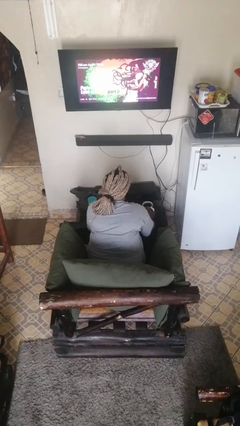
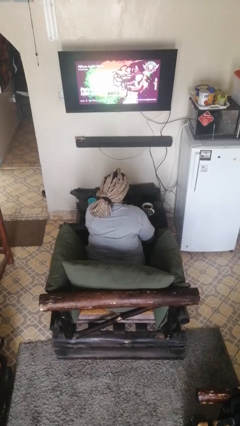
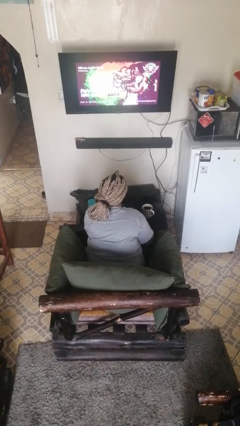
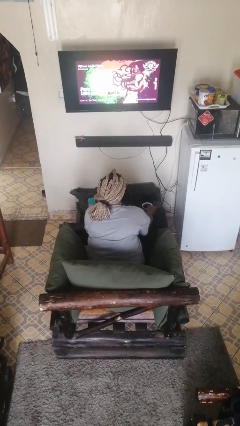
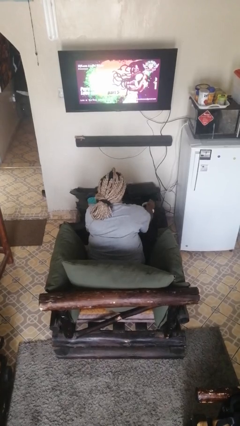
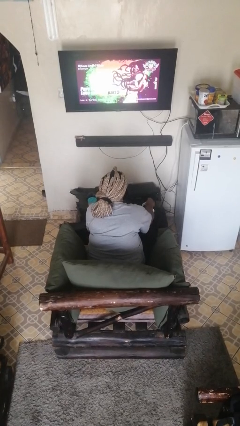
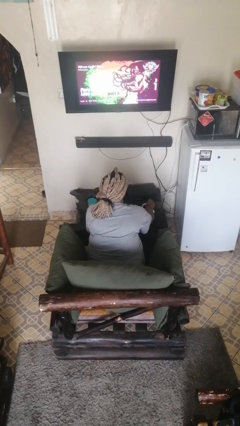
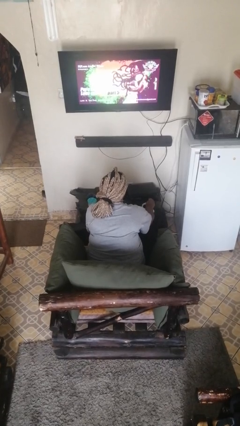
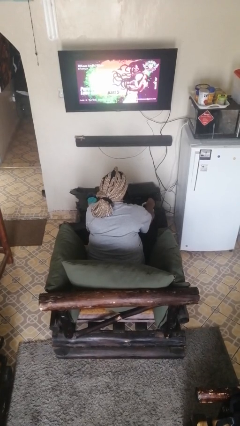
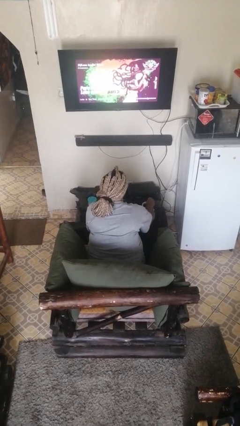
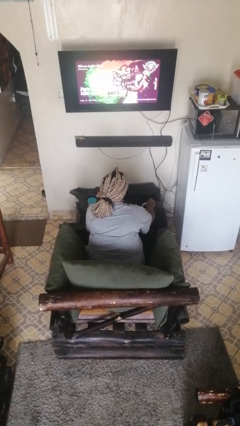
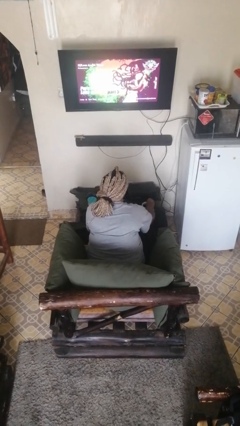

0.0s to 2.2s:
person stirs mug

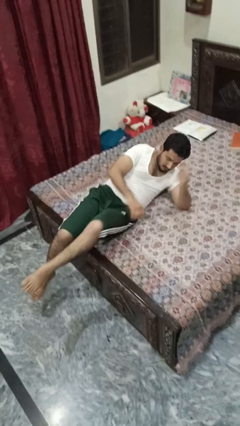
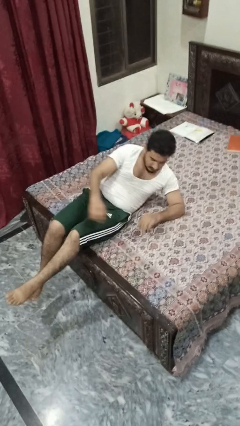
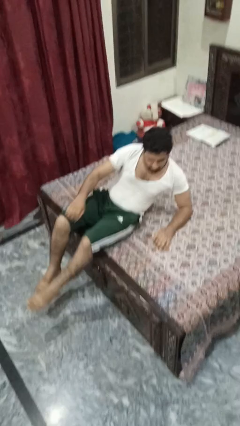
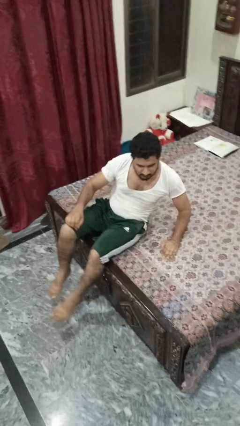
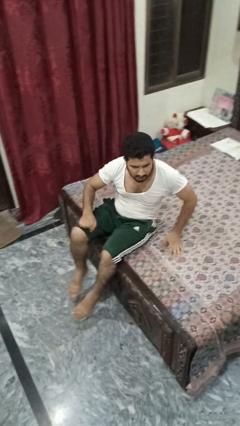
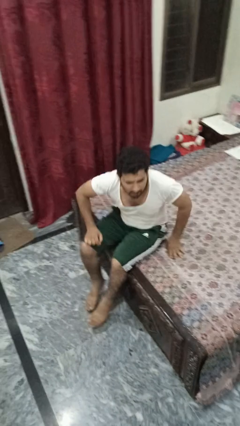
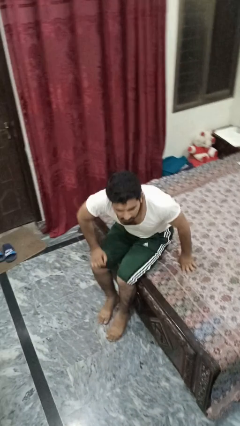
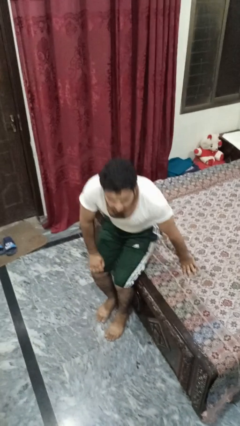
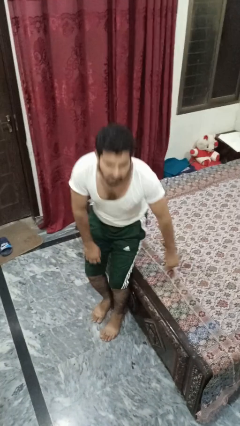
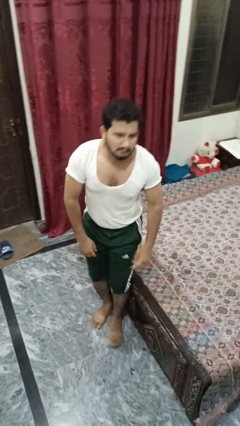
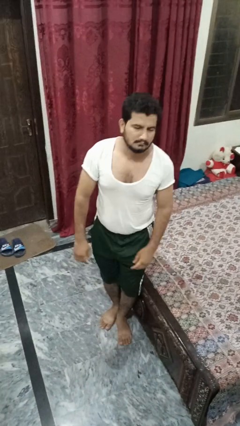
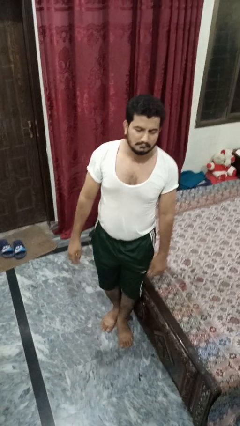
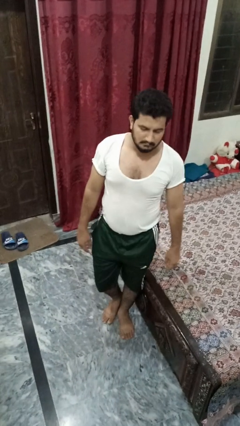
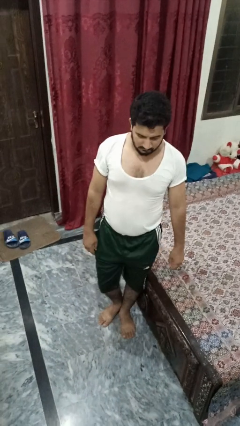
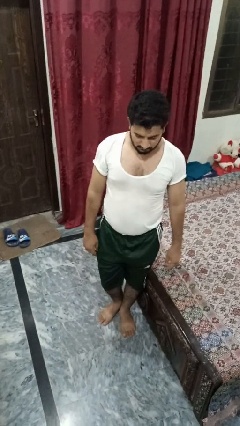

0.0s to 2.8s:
person stands up

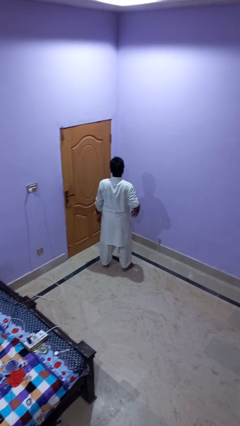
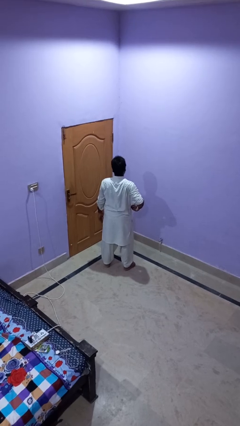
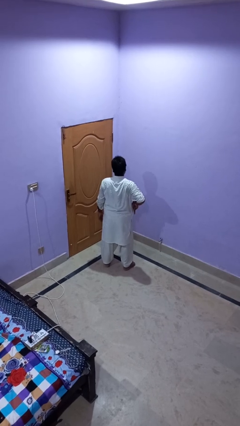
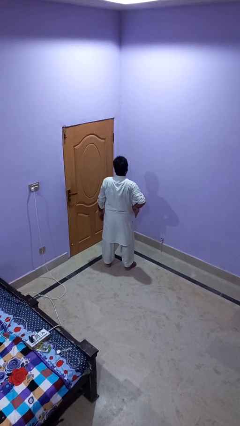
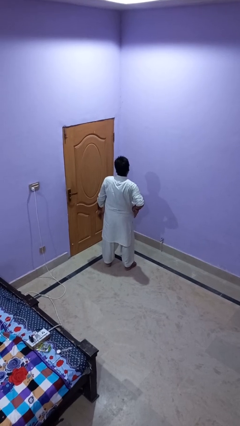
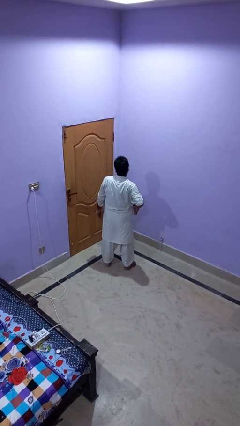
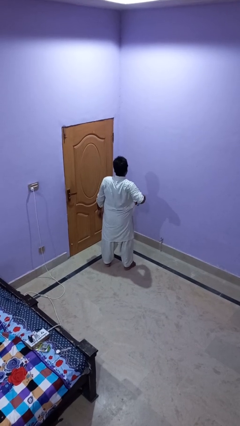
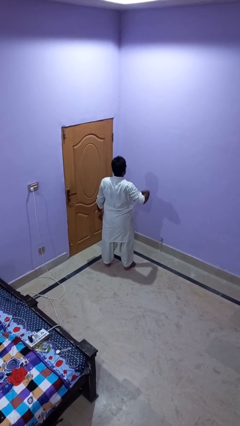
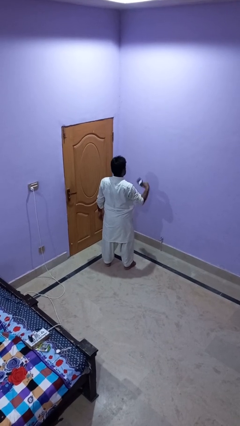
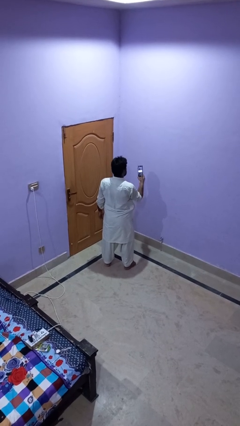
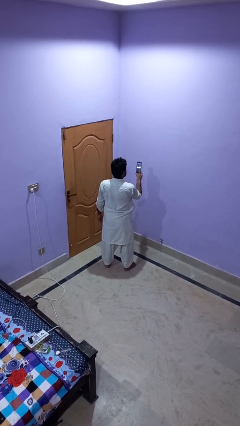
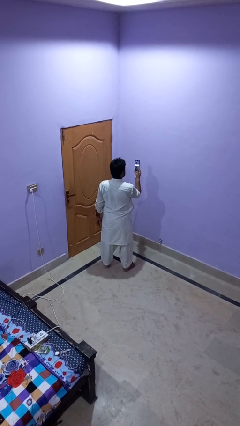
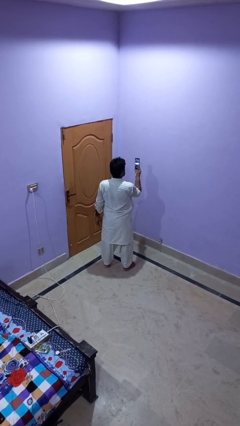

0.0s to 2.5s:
person takes phone from pocket

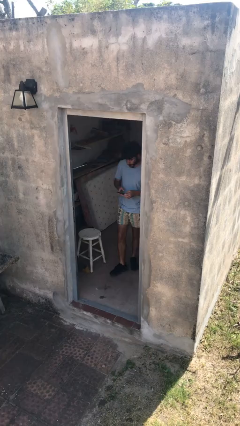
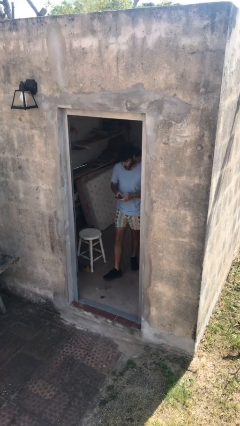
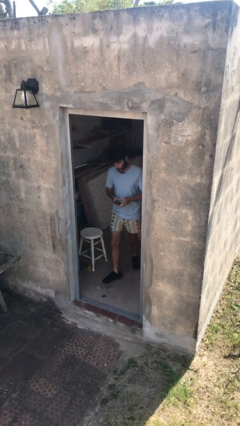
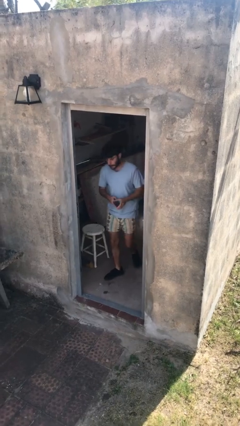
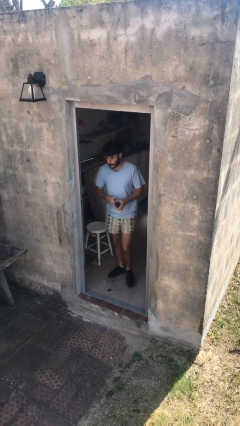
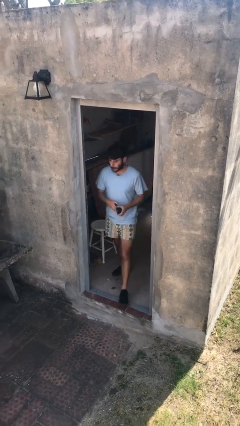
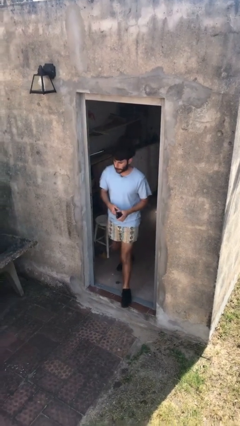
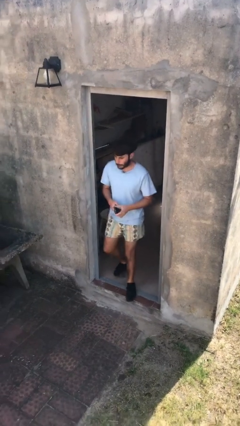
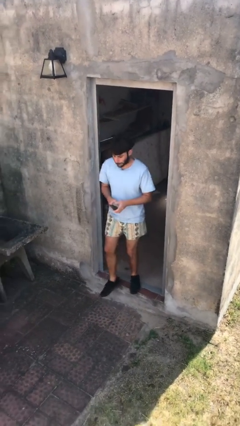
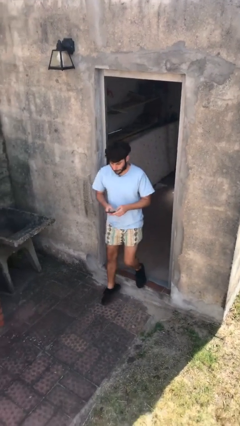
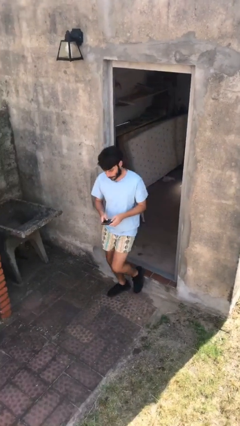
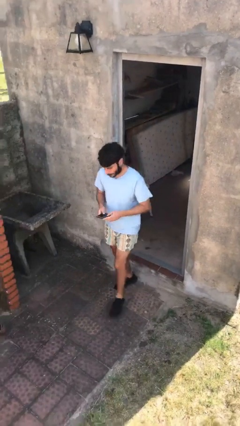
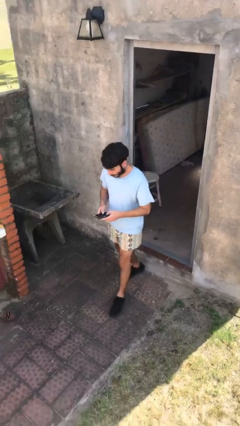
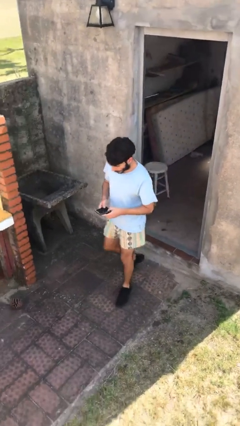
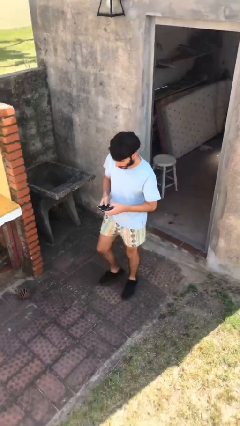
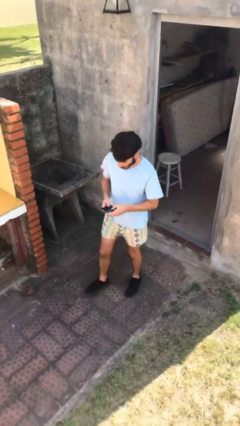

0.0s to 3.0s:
person enters scene through structure

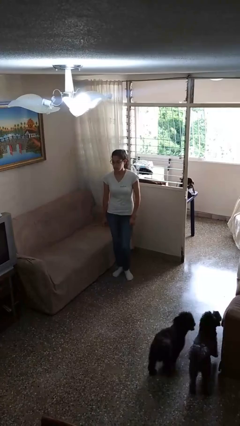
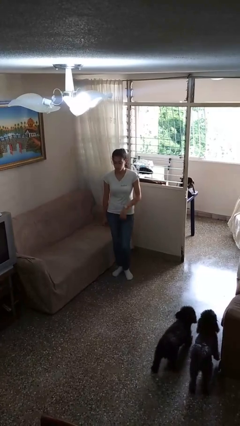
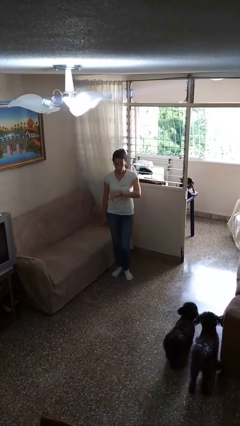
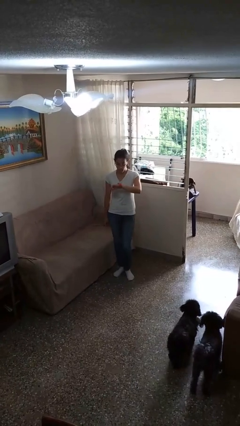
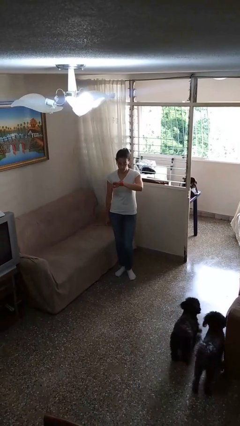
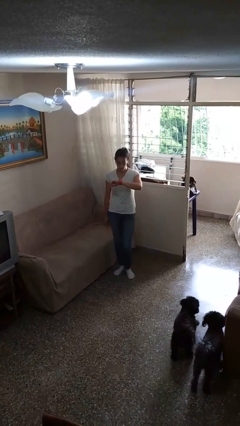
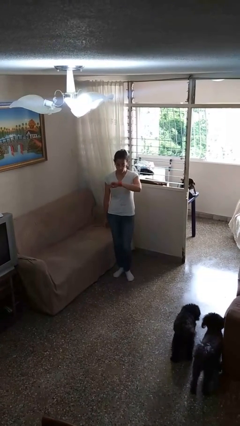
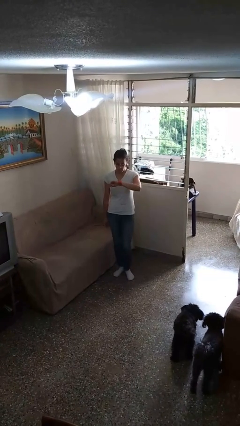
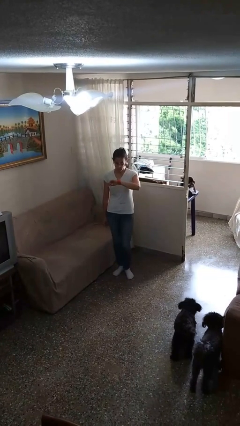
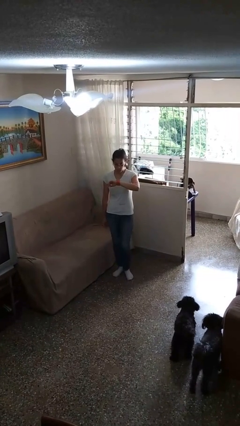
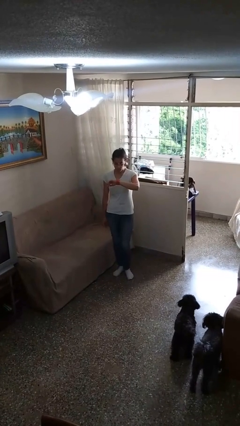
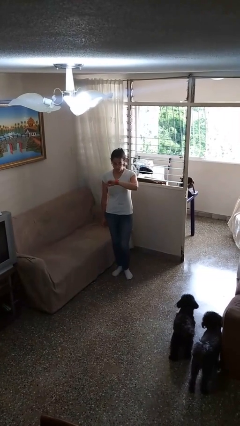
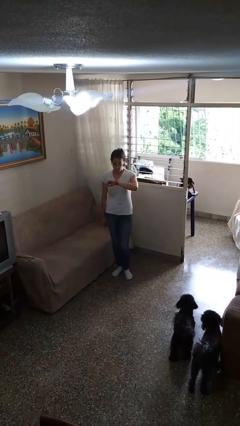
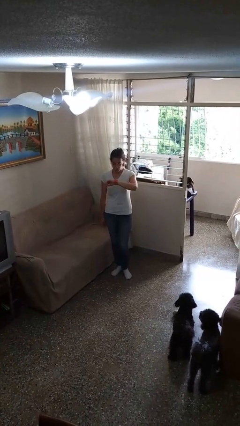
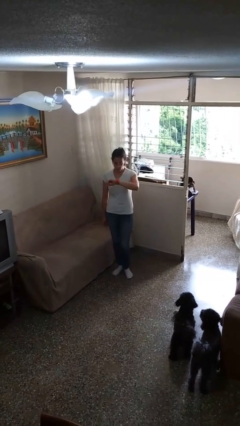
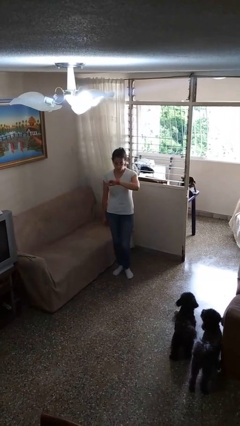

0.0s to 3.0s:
person looks at wristwatch

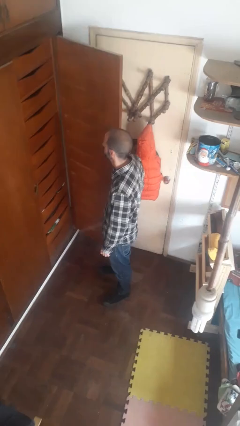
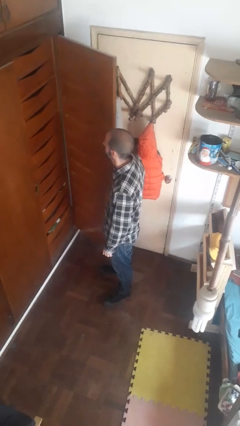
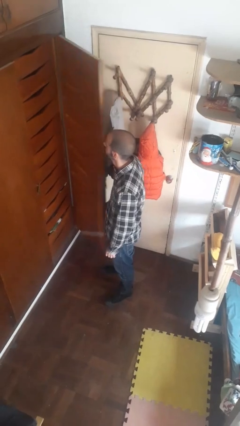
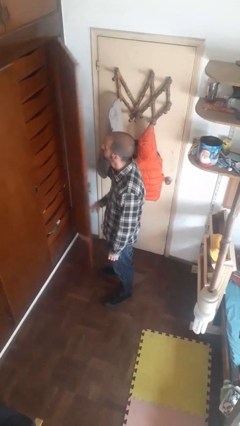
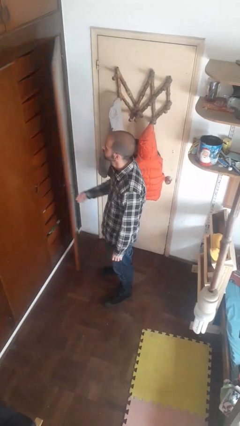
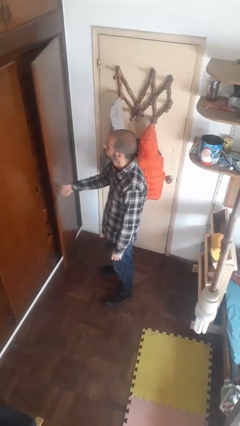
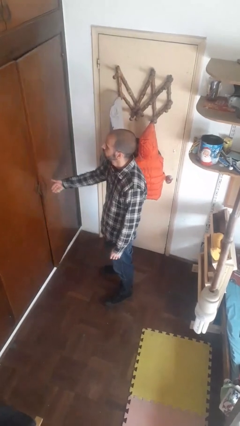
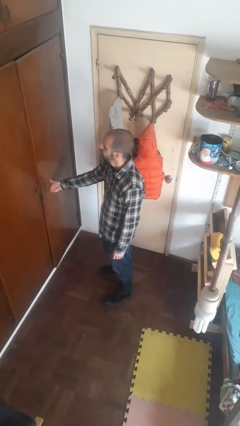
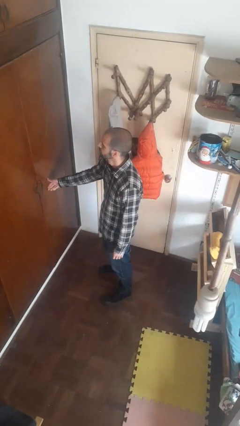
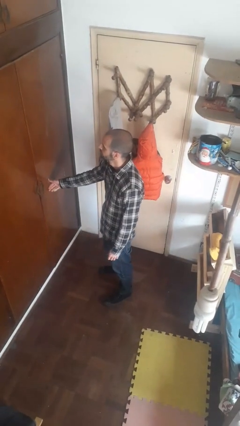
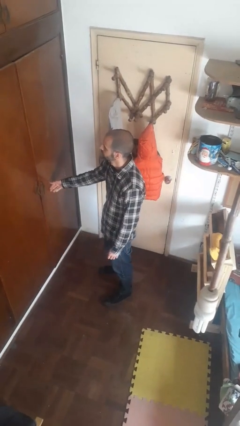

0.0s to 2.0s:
person closes closet door

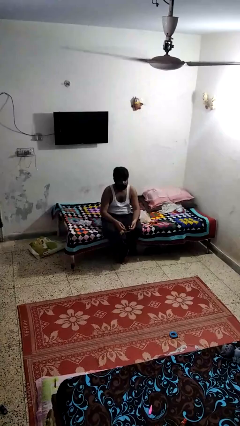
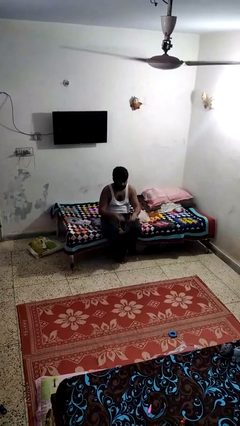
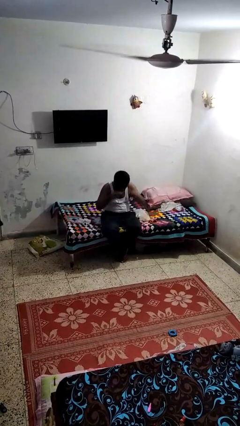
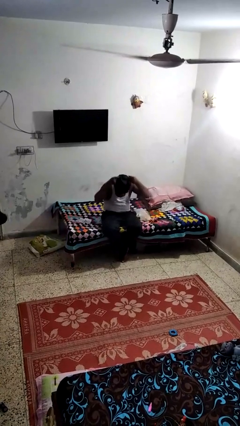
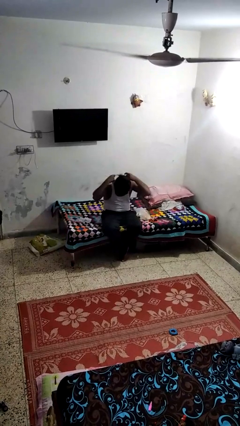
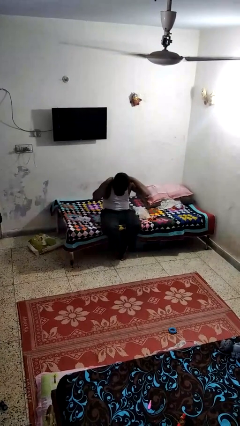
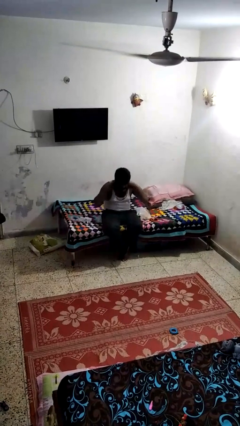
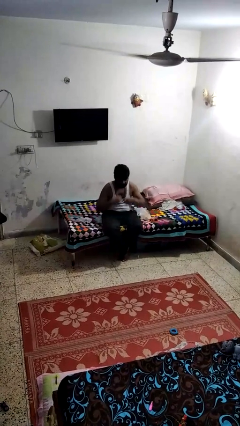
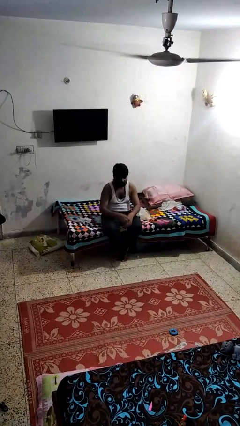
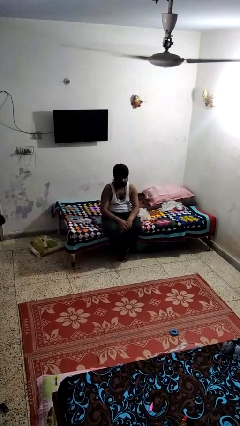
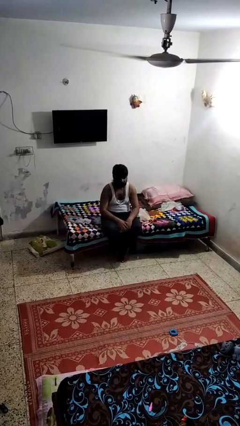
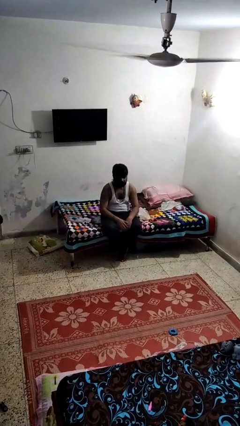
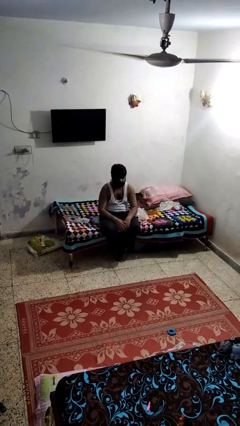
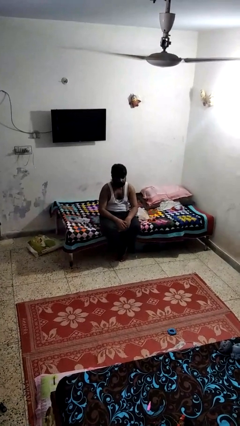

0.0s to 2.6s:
person puts on necklace
